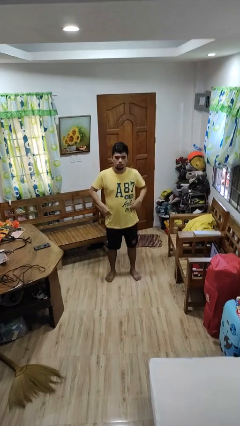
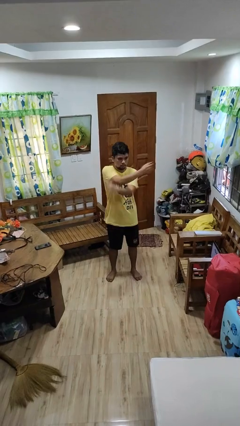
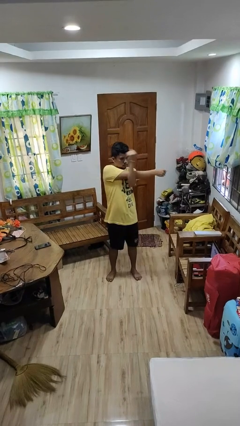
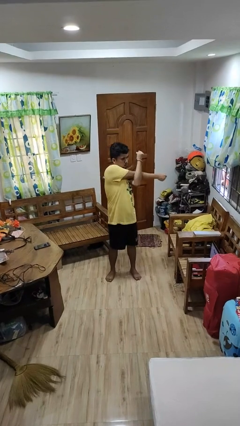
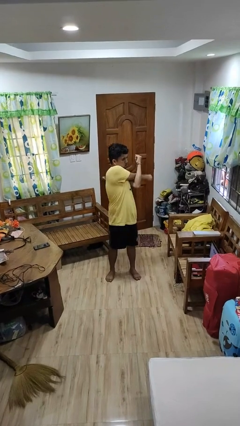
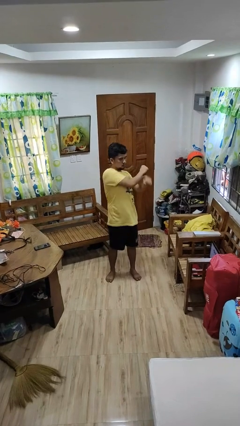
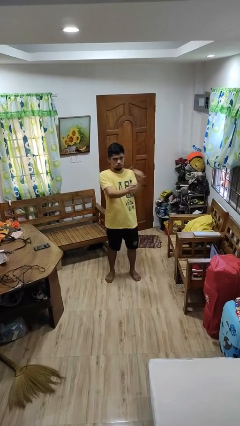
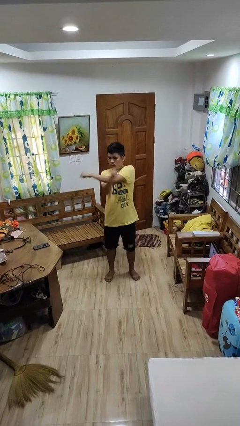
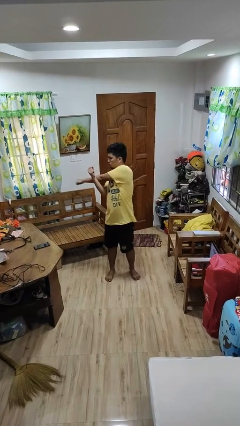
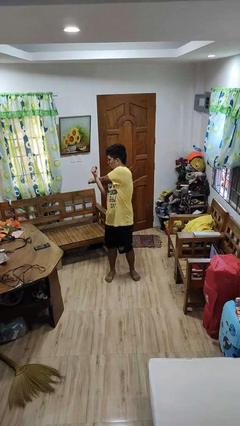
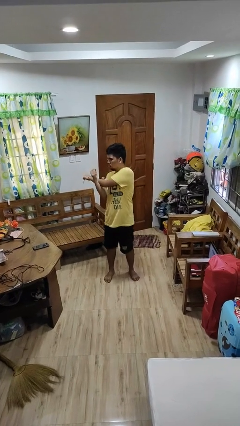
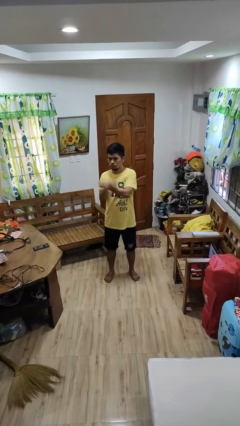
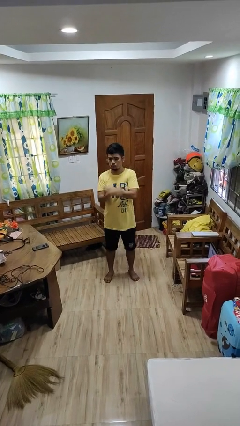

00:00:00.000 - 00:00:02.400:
person stretches arms to side

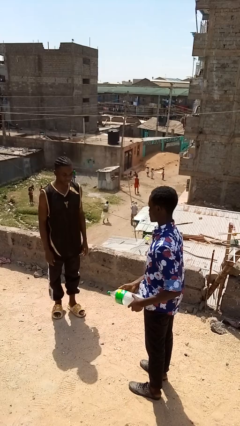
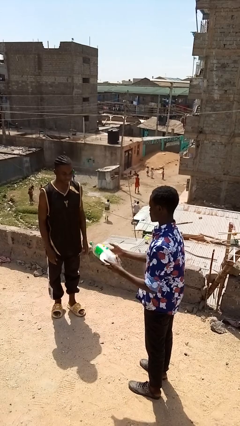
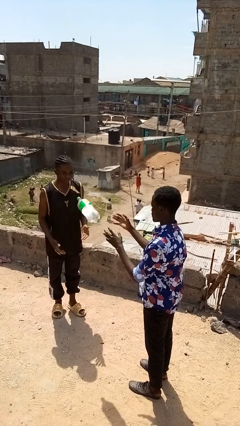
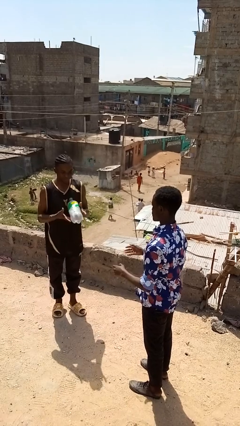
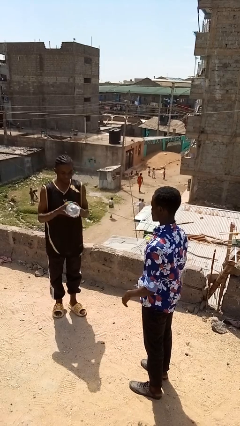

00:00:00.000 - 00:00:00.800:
person throws object to person

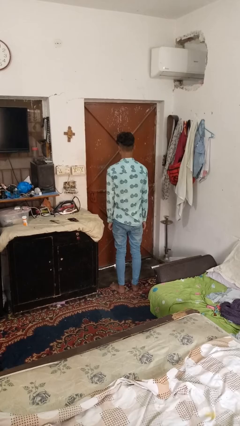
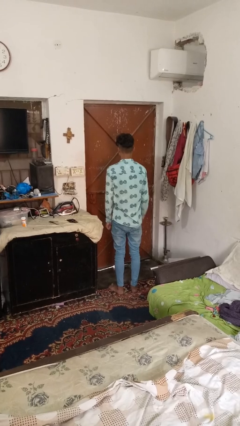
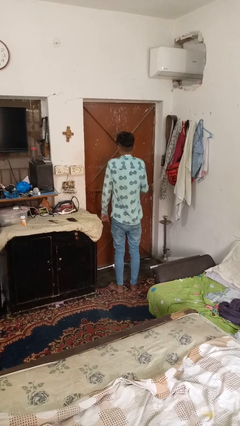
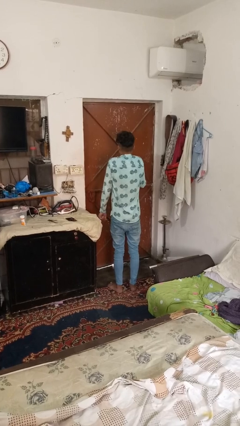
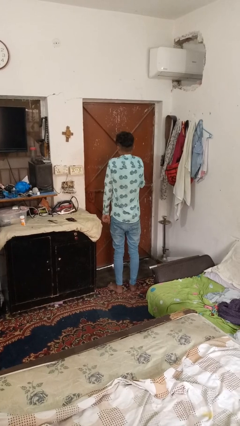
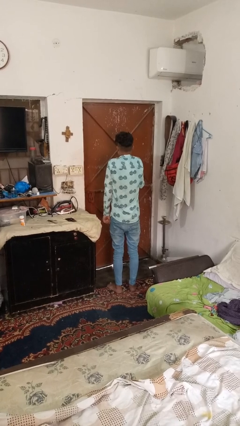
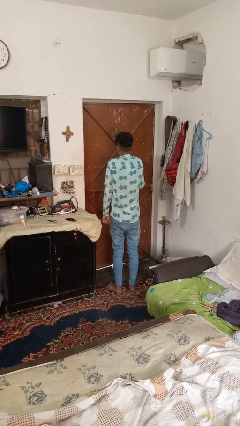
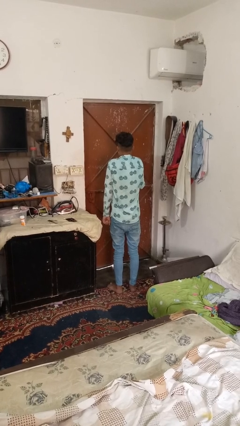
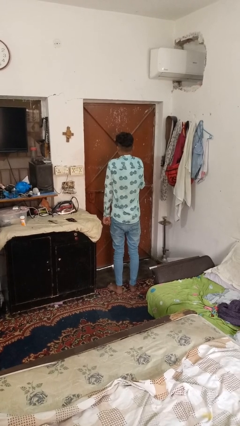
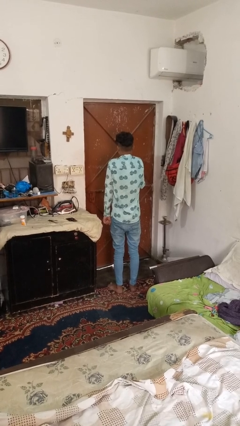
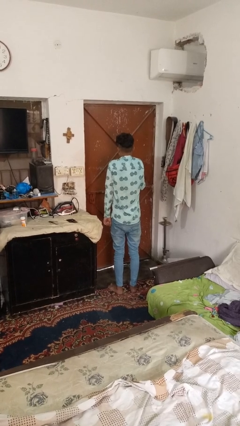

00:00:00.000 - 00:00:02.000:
person shrugs

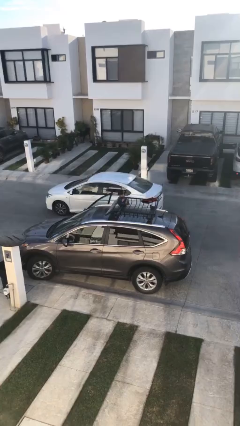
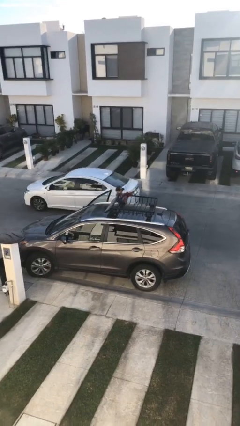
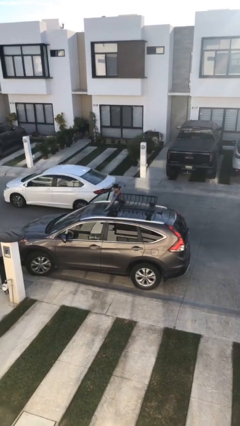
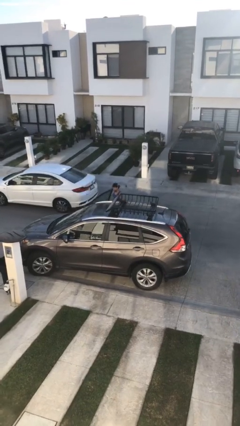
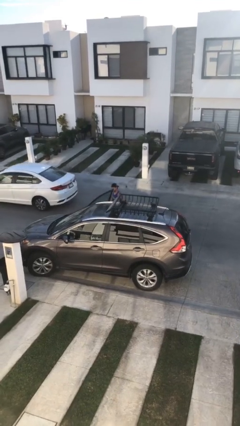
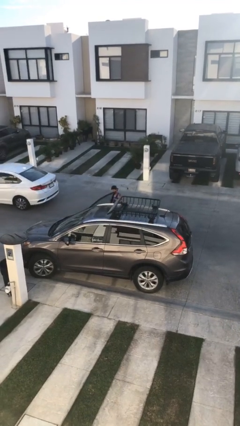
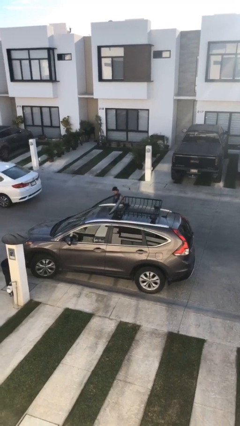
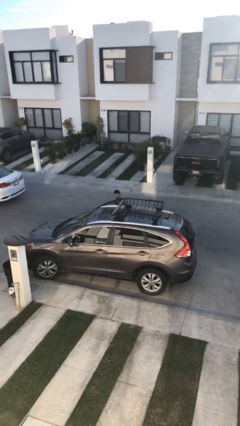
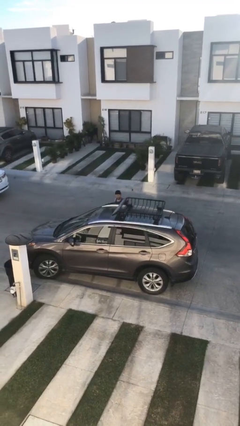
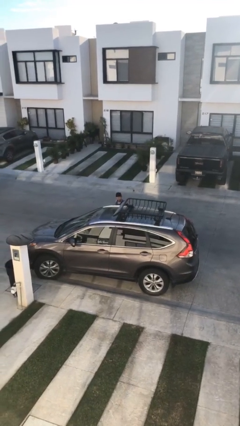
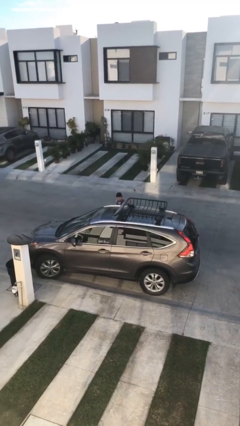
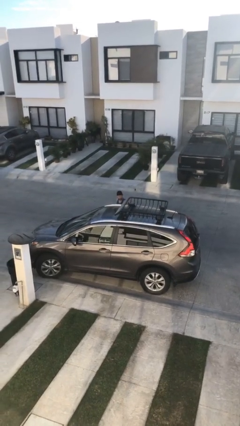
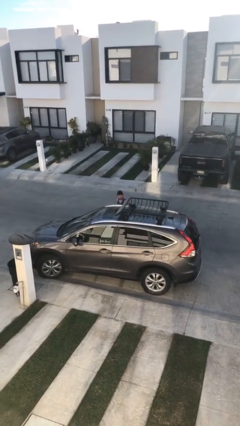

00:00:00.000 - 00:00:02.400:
person closes car door

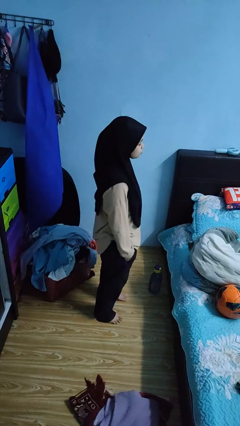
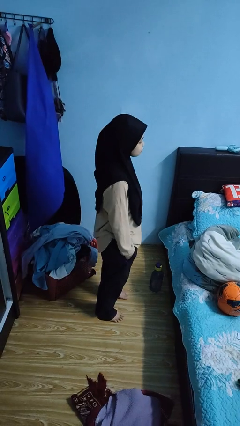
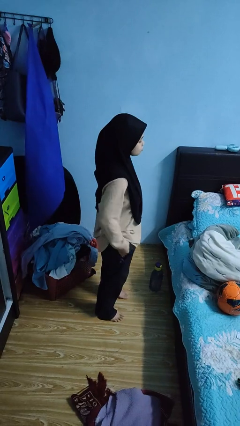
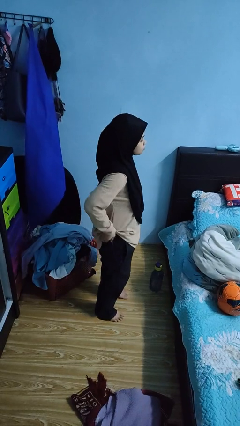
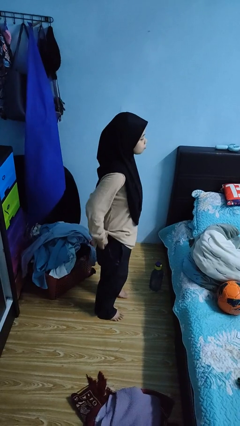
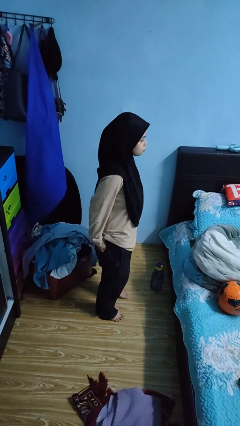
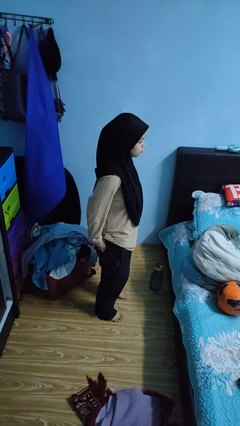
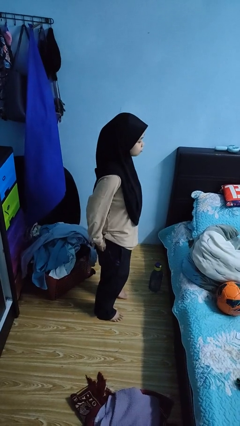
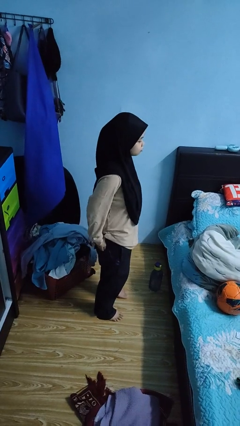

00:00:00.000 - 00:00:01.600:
person puts hands in back pockets

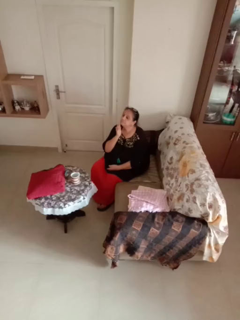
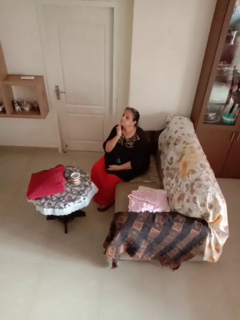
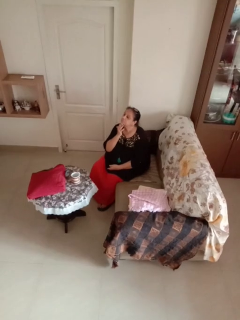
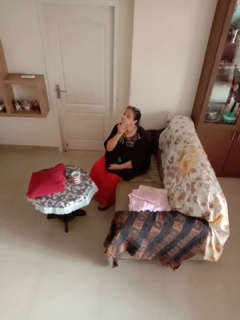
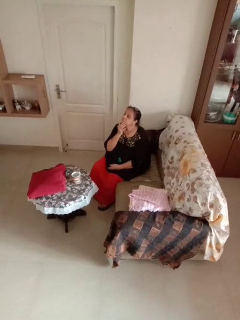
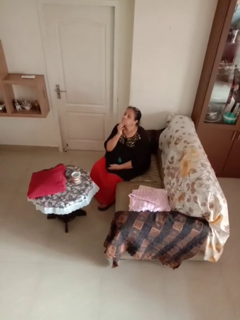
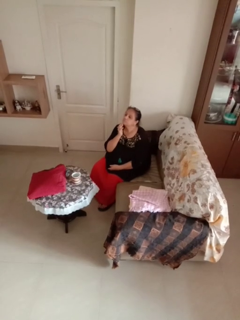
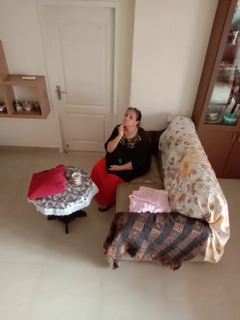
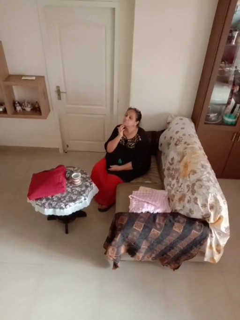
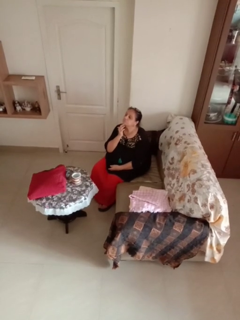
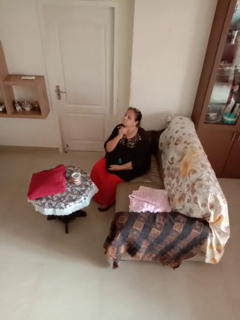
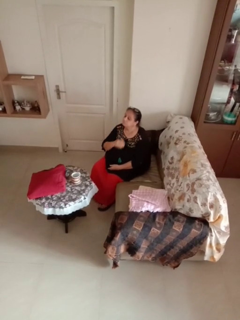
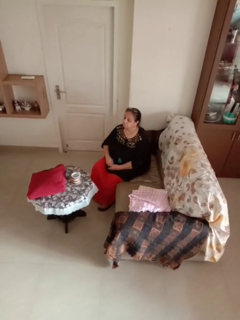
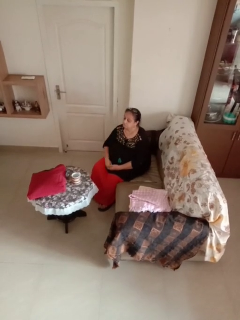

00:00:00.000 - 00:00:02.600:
person strokes chin

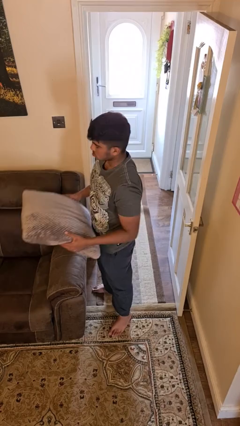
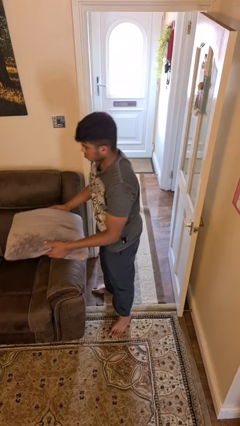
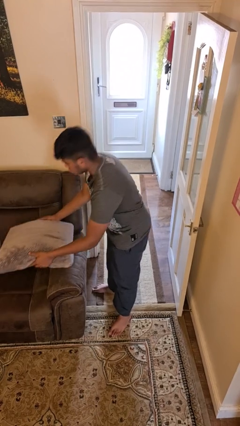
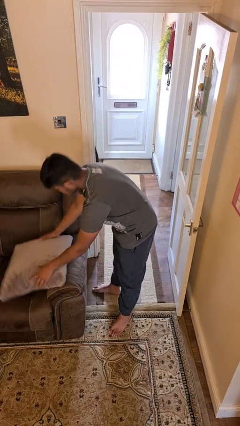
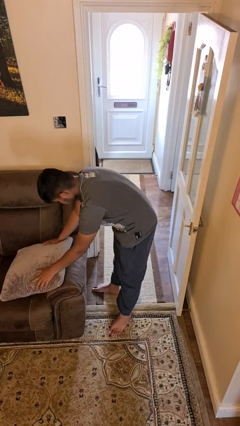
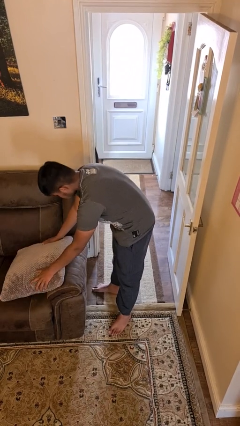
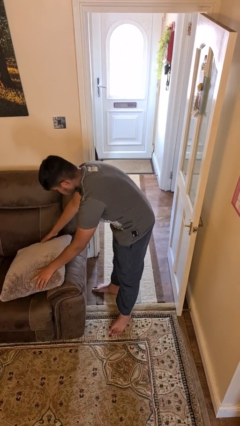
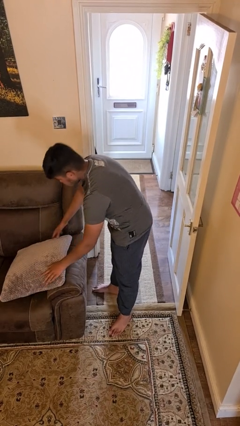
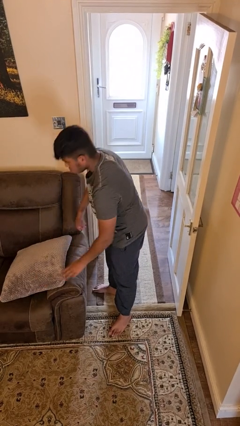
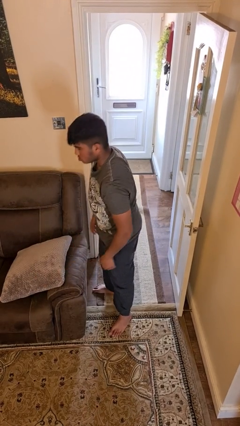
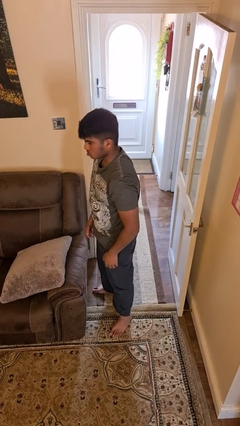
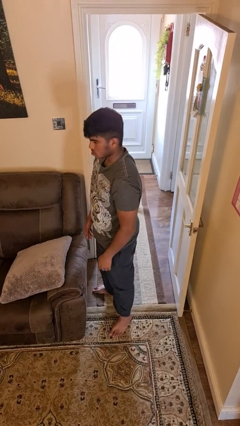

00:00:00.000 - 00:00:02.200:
person puts down object on couch

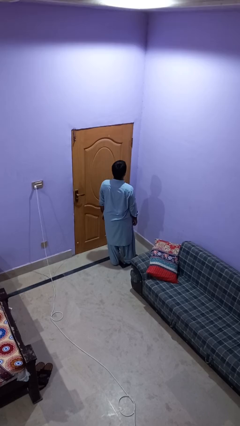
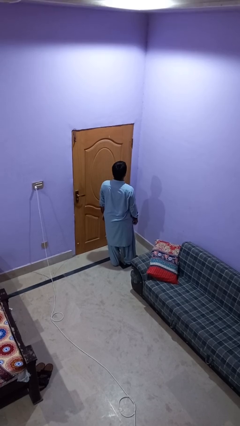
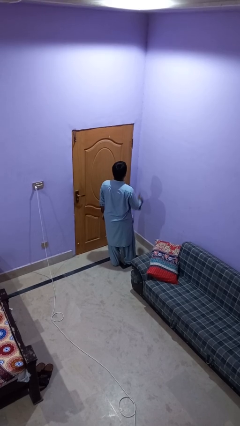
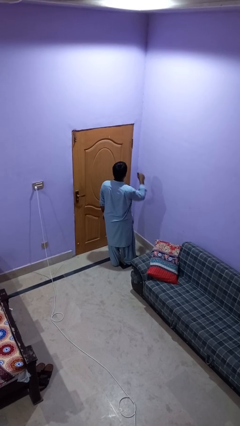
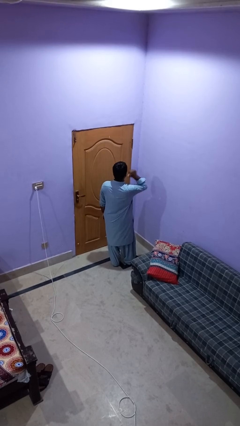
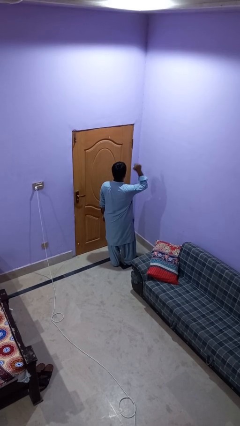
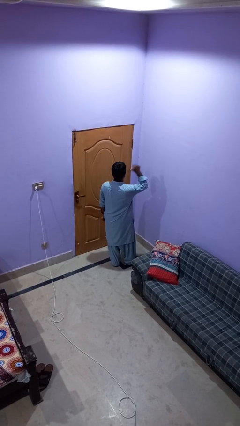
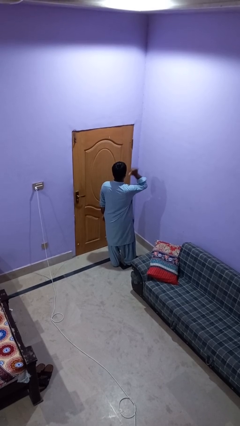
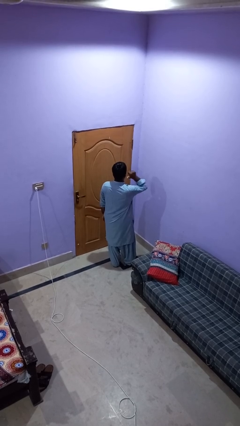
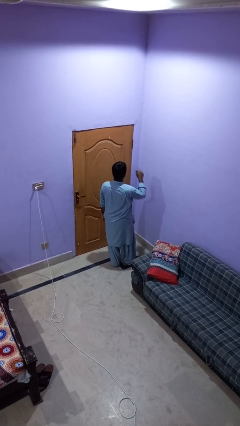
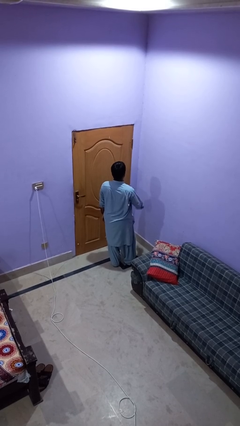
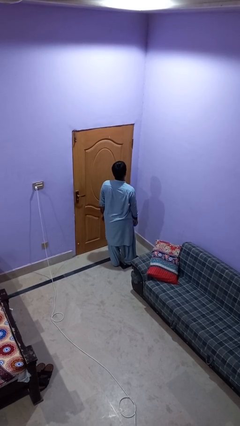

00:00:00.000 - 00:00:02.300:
person gestures behind me

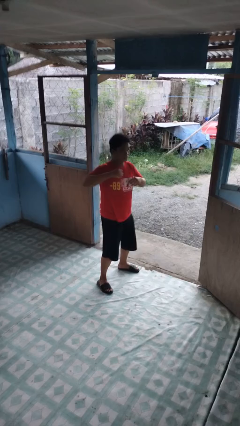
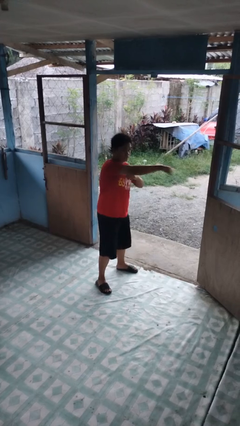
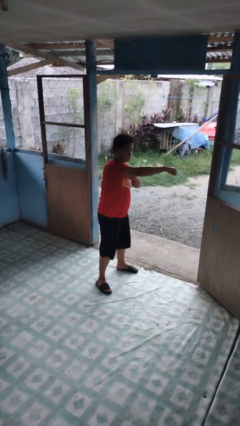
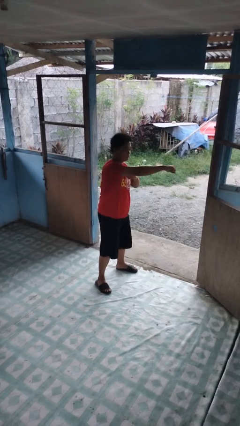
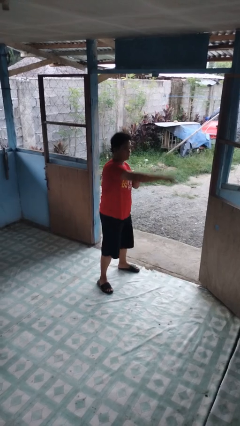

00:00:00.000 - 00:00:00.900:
person punches
